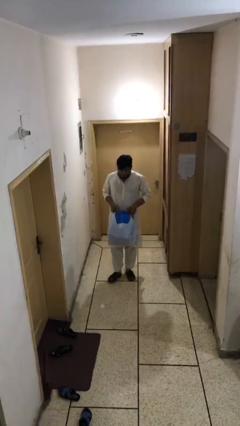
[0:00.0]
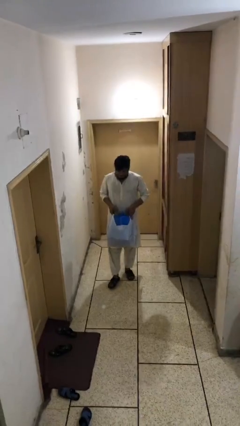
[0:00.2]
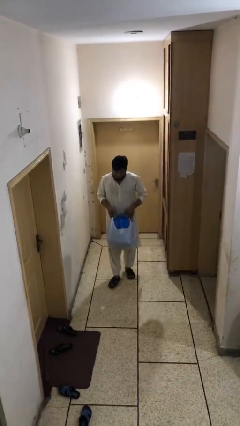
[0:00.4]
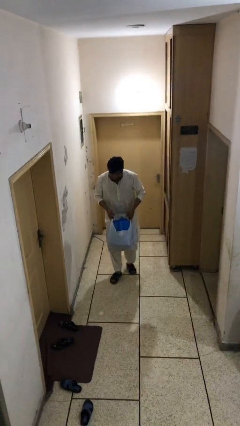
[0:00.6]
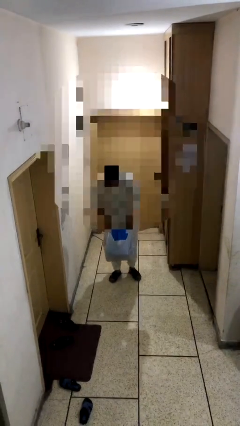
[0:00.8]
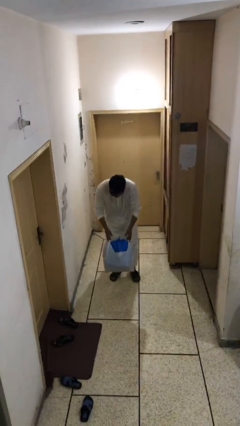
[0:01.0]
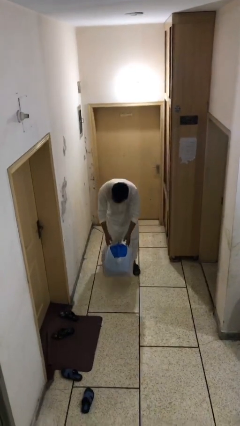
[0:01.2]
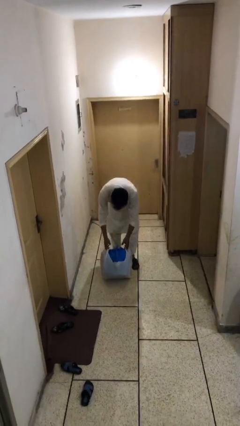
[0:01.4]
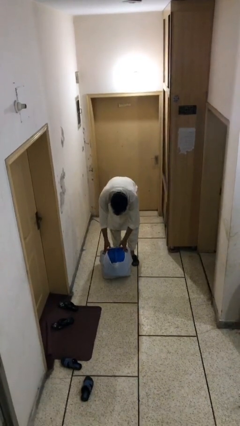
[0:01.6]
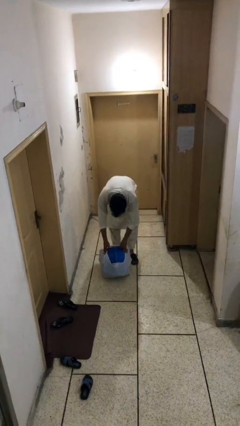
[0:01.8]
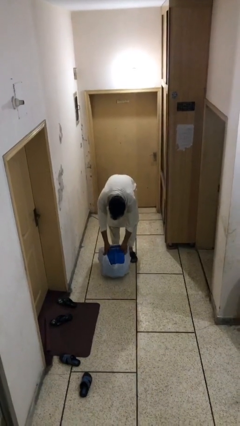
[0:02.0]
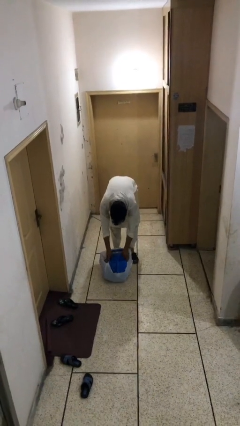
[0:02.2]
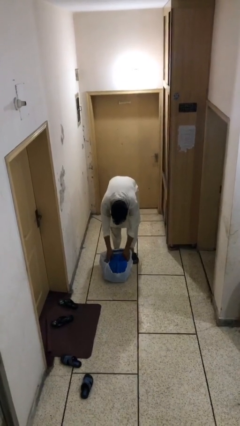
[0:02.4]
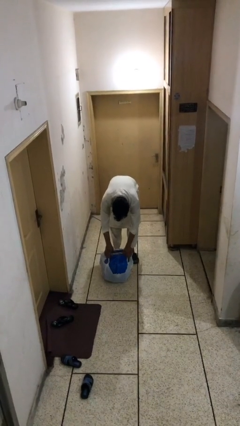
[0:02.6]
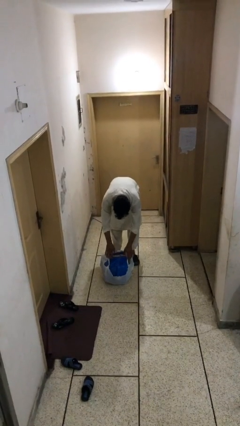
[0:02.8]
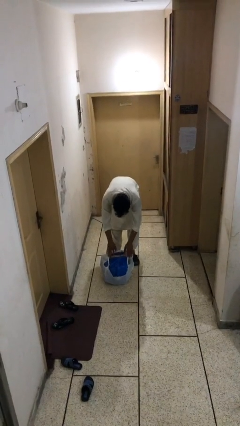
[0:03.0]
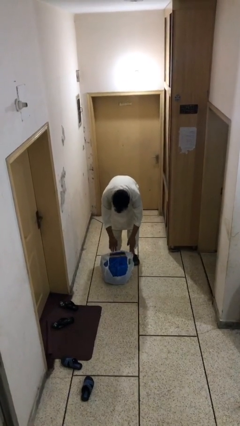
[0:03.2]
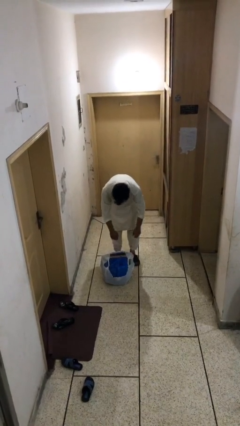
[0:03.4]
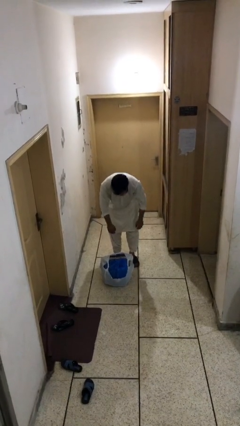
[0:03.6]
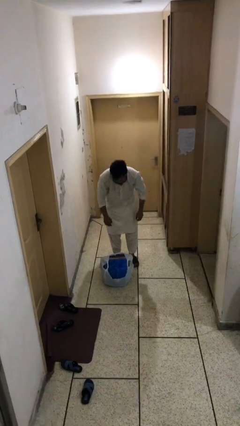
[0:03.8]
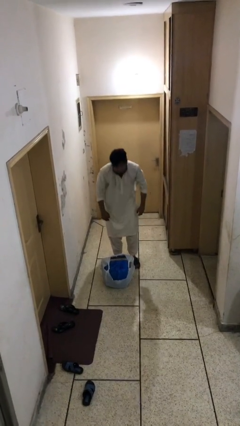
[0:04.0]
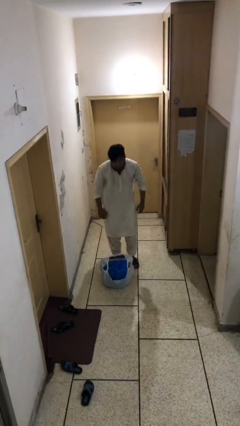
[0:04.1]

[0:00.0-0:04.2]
person puts down object on floor

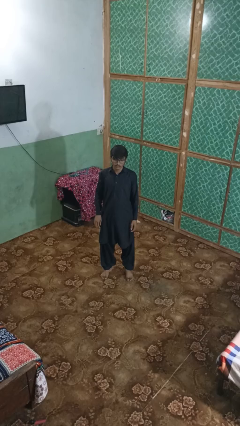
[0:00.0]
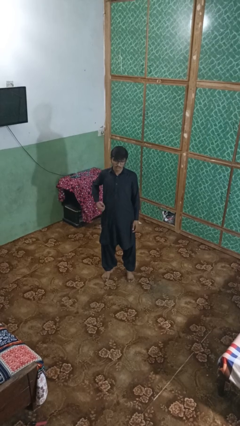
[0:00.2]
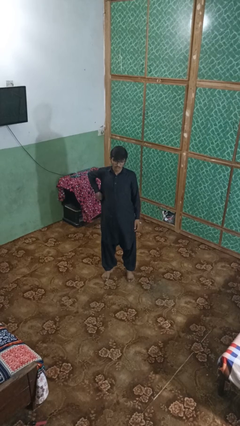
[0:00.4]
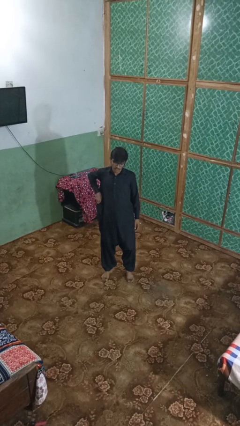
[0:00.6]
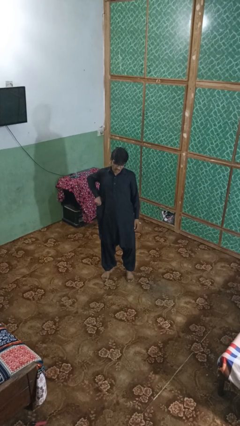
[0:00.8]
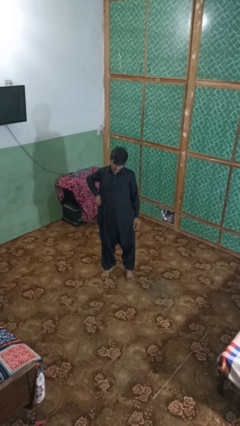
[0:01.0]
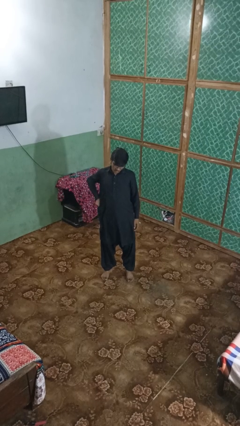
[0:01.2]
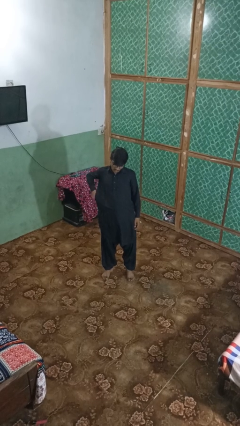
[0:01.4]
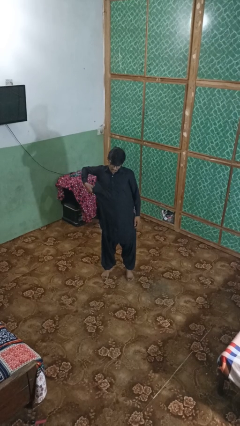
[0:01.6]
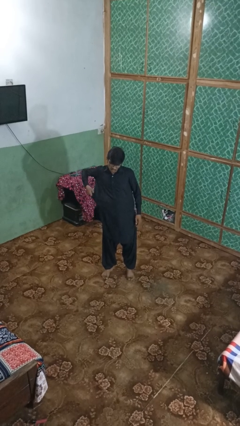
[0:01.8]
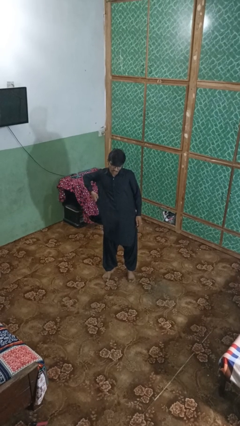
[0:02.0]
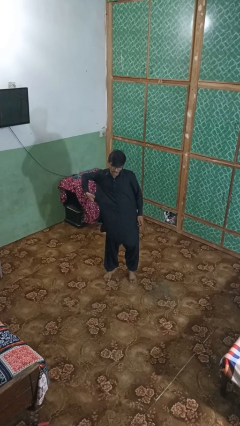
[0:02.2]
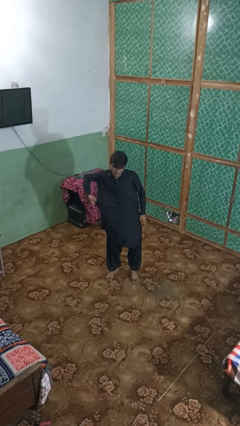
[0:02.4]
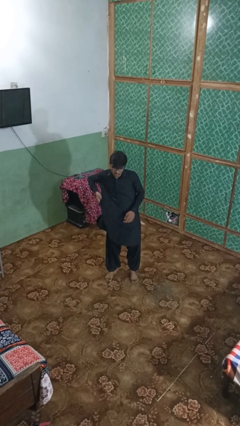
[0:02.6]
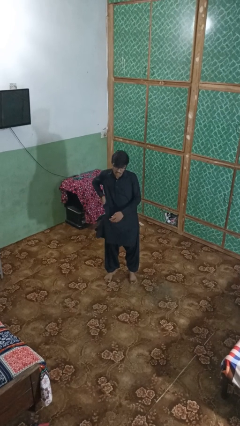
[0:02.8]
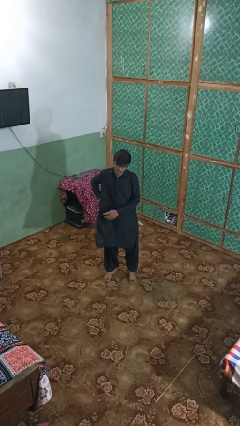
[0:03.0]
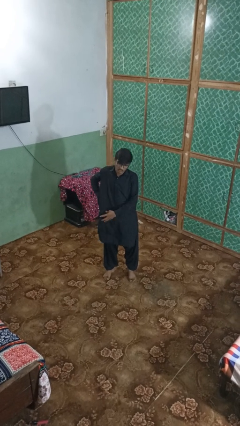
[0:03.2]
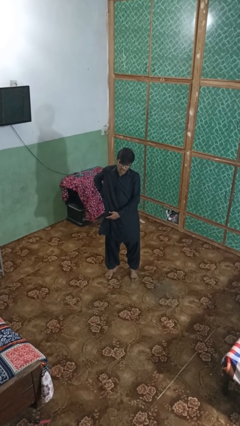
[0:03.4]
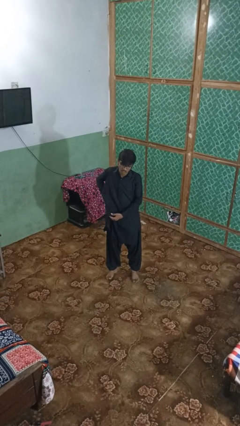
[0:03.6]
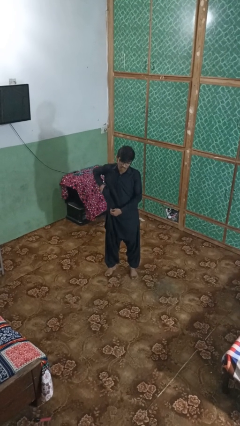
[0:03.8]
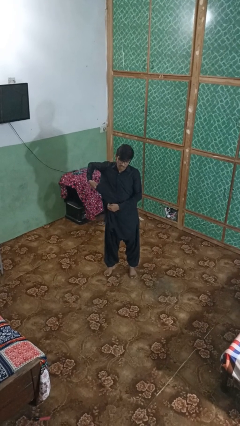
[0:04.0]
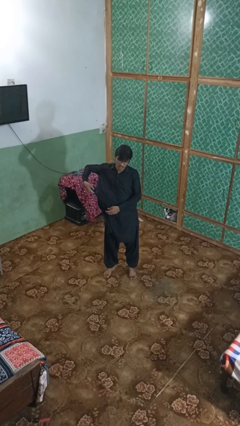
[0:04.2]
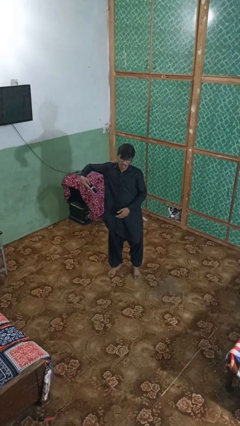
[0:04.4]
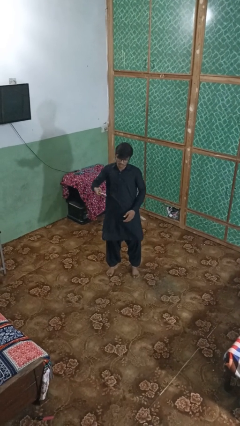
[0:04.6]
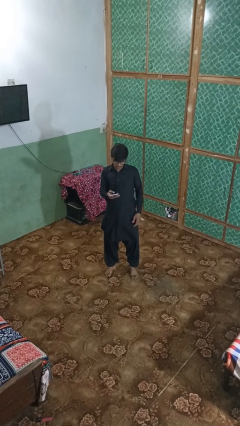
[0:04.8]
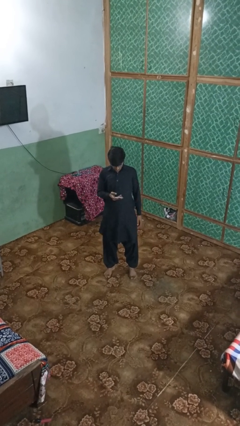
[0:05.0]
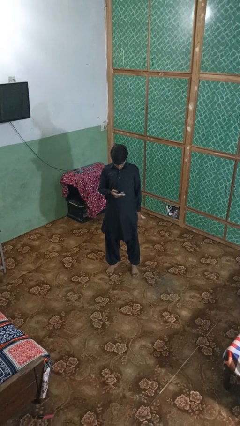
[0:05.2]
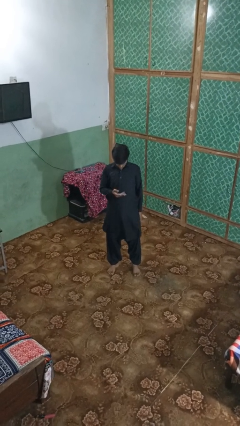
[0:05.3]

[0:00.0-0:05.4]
person takes phone from pocket

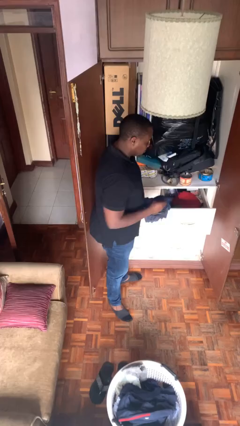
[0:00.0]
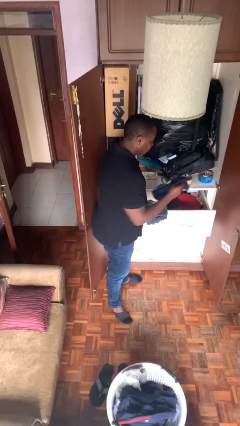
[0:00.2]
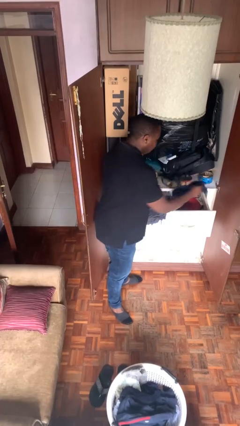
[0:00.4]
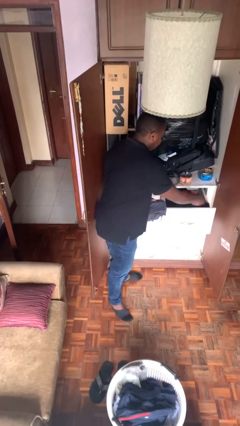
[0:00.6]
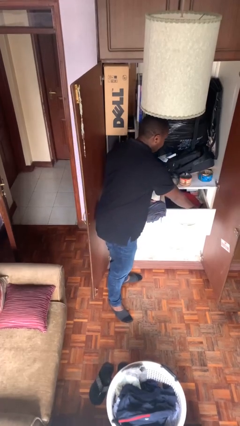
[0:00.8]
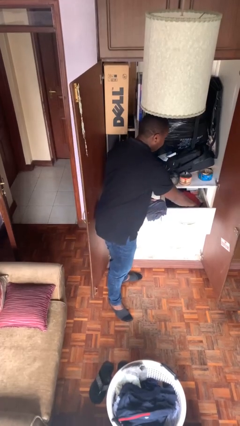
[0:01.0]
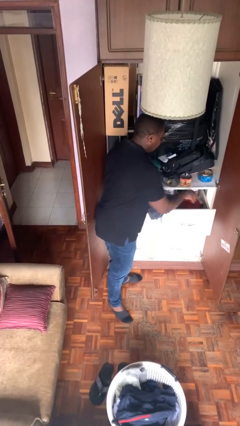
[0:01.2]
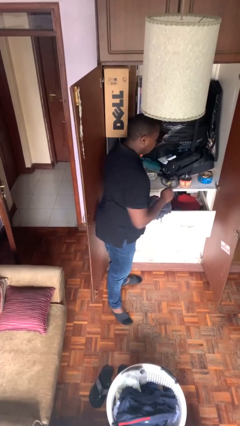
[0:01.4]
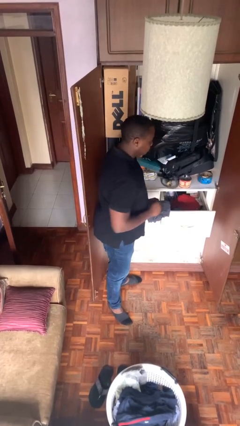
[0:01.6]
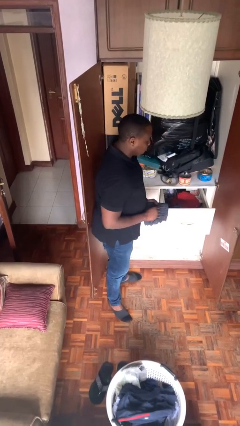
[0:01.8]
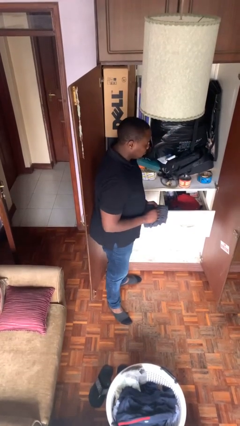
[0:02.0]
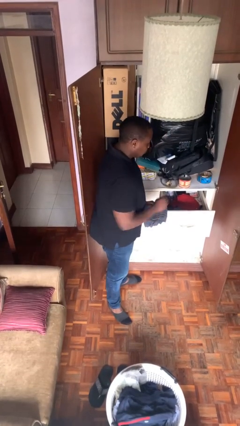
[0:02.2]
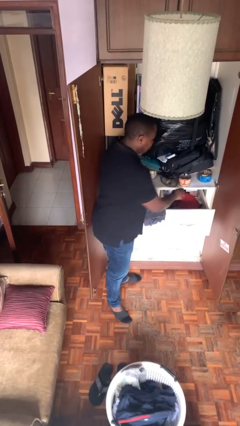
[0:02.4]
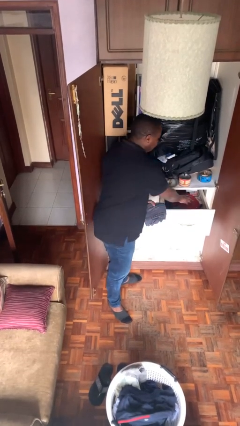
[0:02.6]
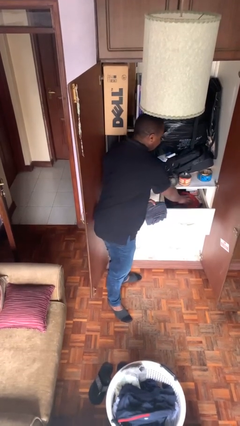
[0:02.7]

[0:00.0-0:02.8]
person puts clothes into dresser

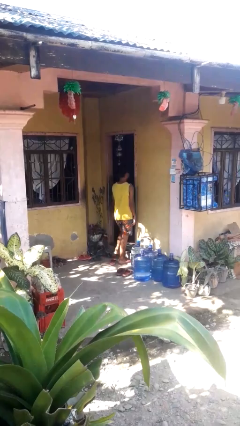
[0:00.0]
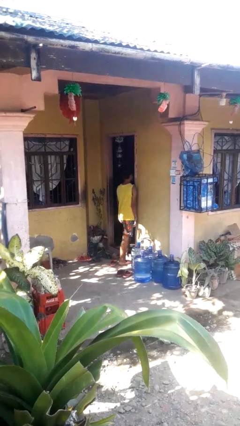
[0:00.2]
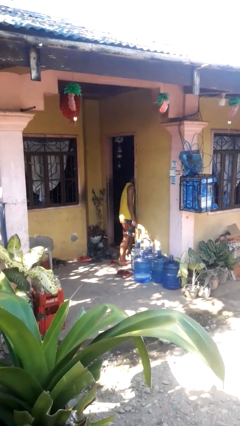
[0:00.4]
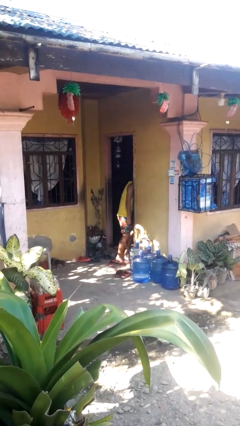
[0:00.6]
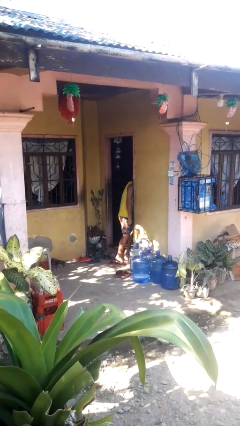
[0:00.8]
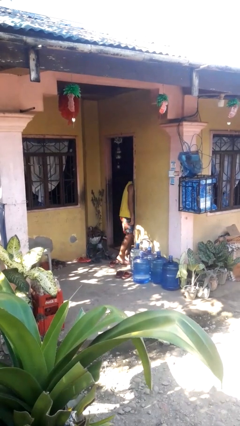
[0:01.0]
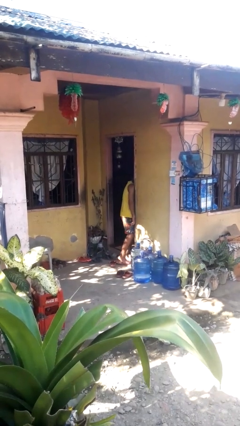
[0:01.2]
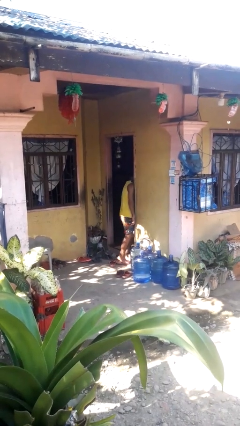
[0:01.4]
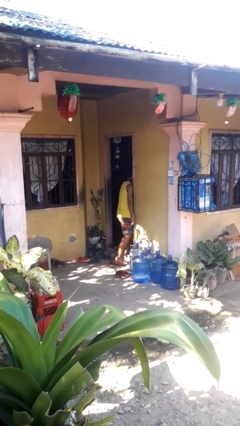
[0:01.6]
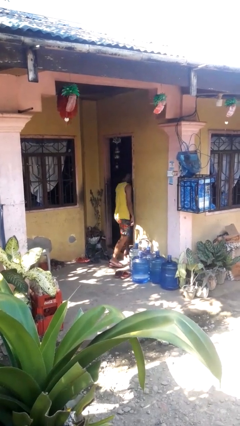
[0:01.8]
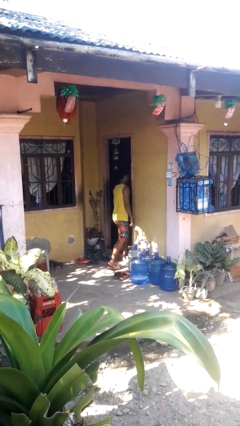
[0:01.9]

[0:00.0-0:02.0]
person bumps into wall

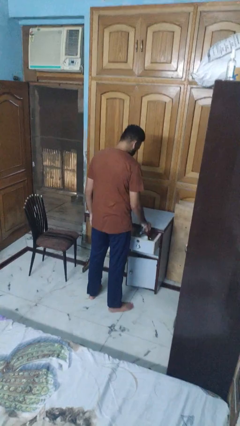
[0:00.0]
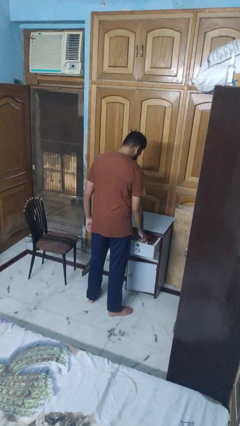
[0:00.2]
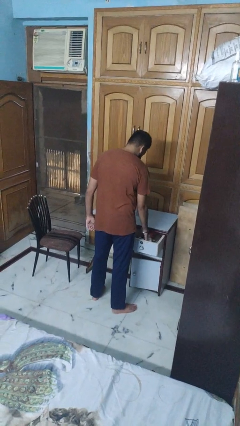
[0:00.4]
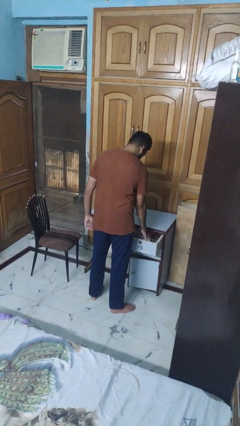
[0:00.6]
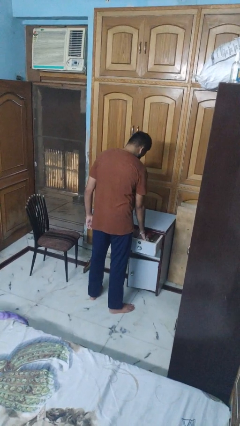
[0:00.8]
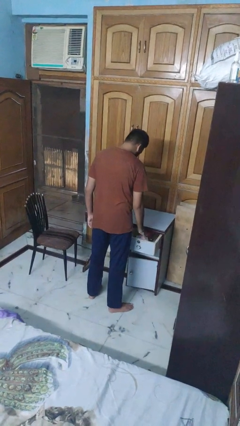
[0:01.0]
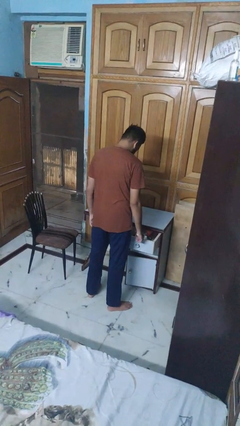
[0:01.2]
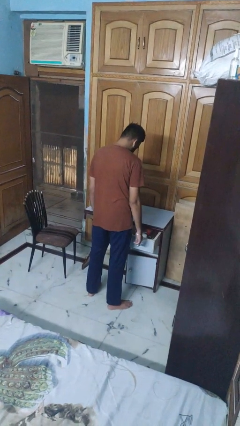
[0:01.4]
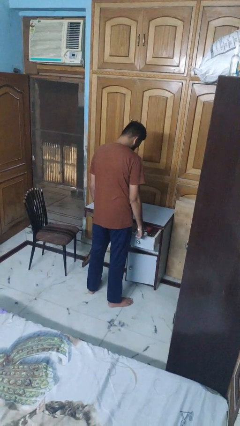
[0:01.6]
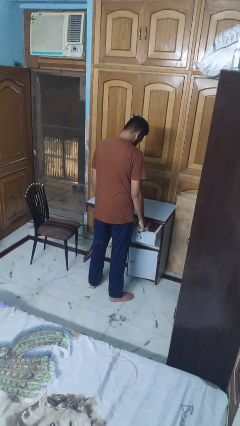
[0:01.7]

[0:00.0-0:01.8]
person puts object into kitchen drawer

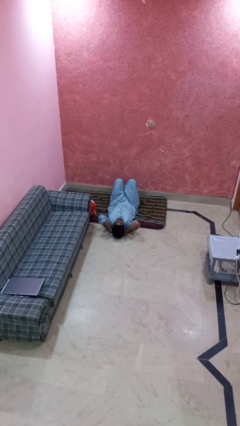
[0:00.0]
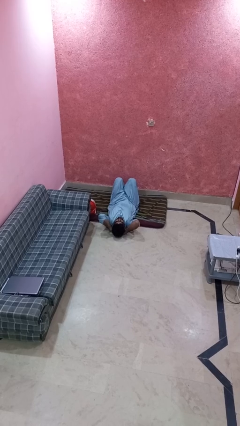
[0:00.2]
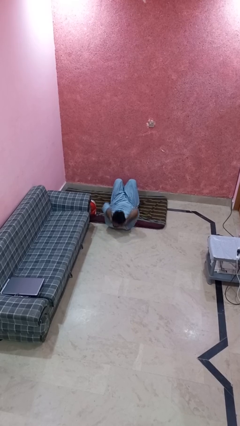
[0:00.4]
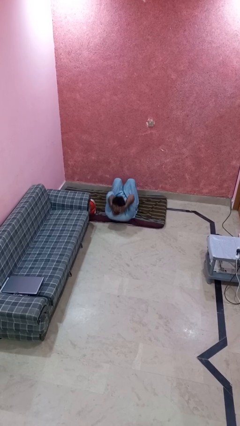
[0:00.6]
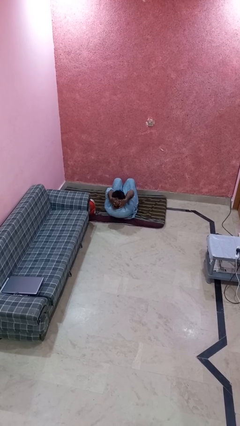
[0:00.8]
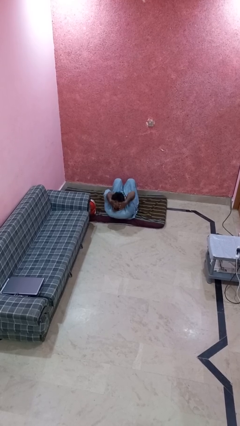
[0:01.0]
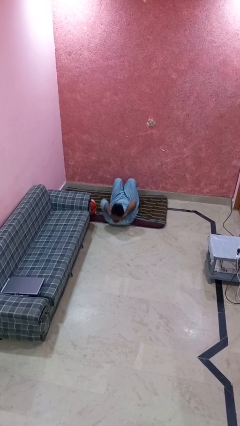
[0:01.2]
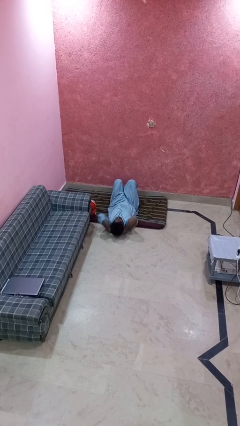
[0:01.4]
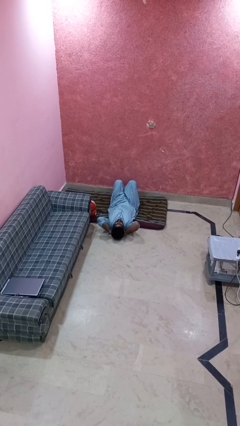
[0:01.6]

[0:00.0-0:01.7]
person exercises with situp
